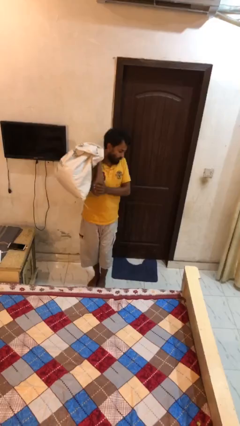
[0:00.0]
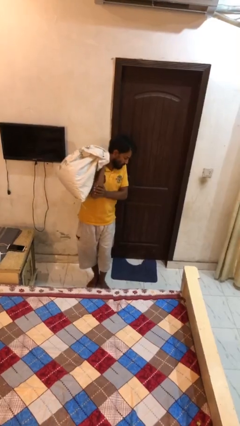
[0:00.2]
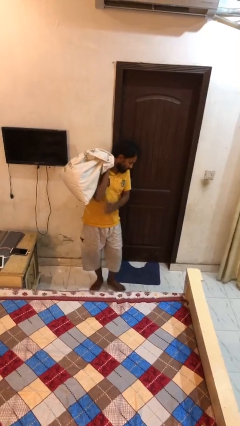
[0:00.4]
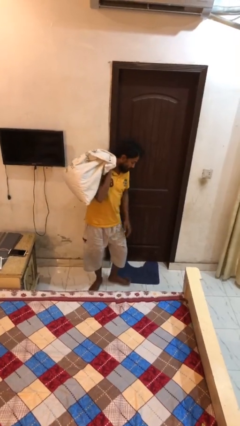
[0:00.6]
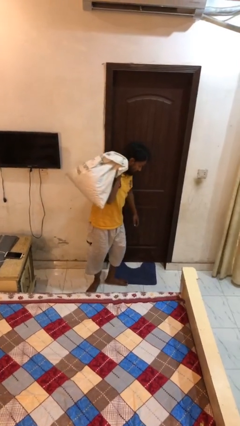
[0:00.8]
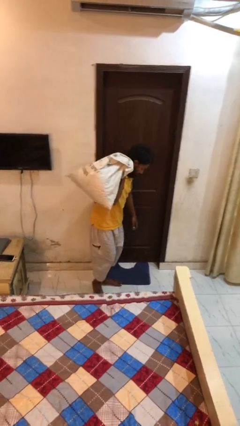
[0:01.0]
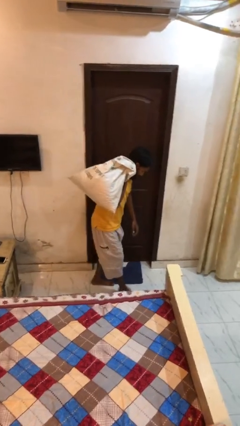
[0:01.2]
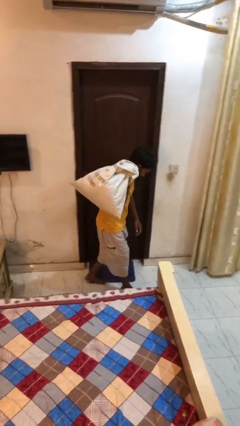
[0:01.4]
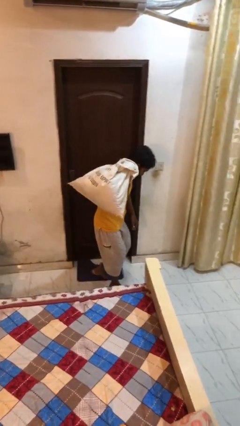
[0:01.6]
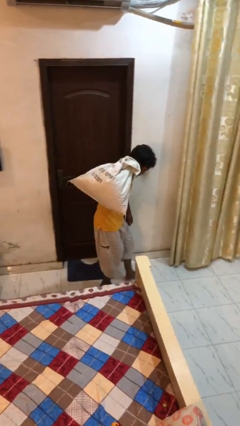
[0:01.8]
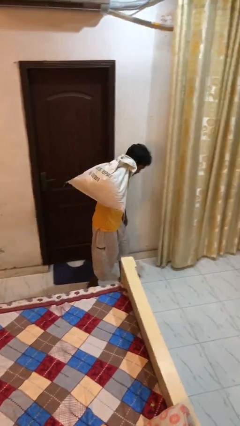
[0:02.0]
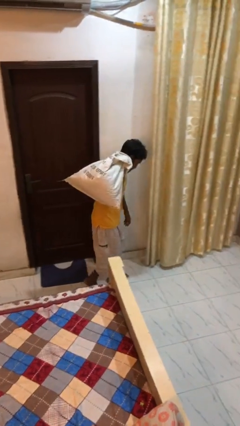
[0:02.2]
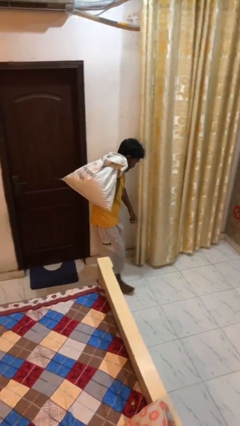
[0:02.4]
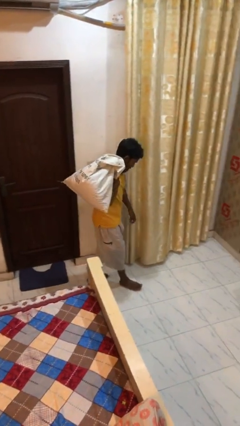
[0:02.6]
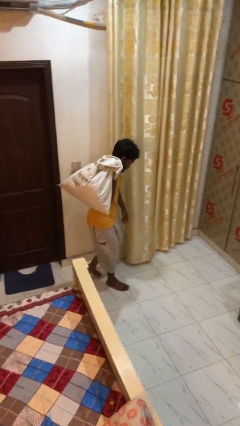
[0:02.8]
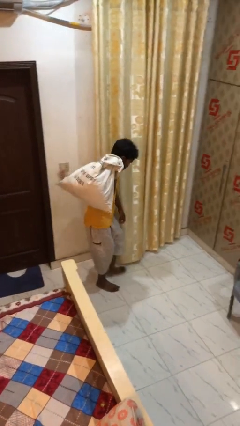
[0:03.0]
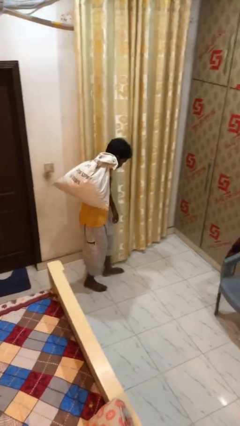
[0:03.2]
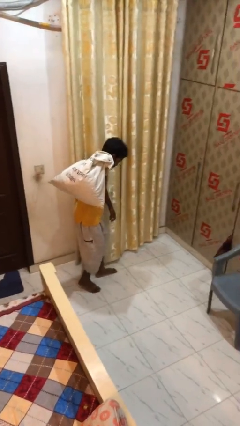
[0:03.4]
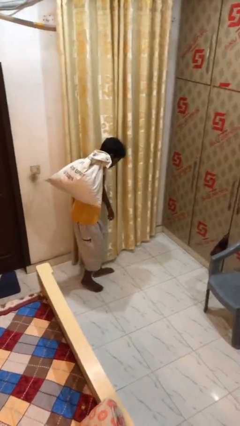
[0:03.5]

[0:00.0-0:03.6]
person carries heavy object

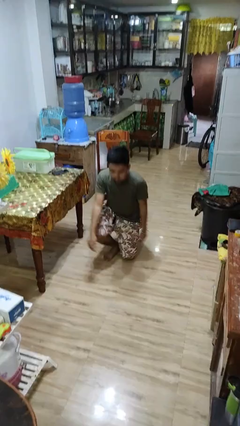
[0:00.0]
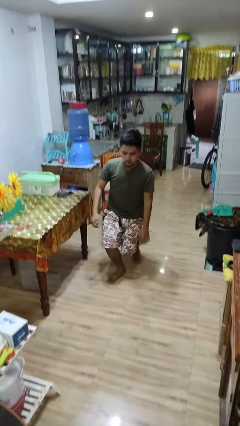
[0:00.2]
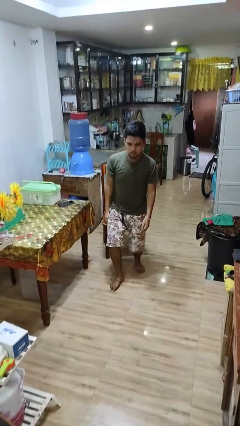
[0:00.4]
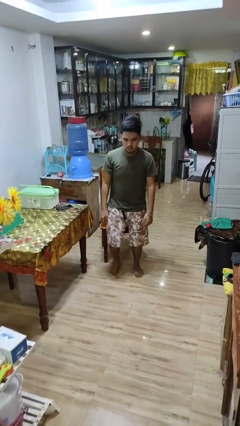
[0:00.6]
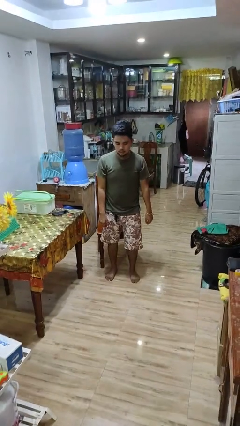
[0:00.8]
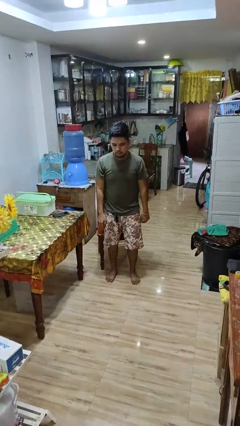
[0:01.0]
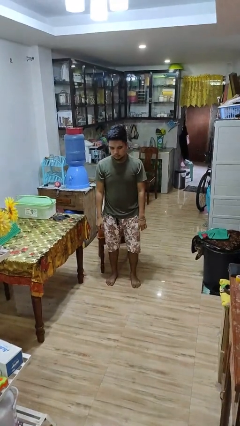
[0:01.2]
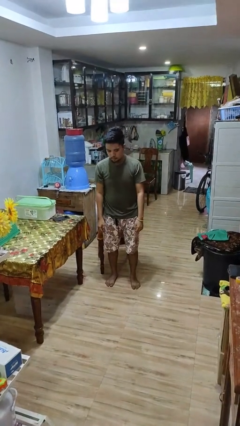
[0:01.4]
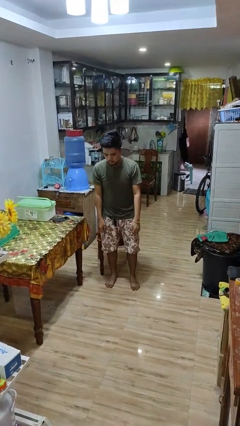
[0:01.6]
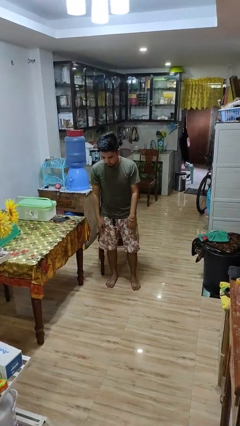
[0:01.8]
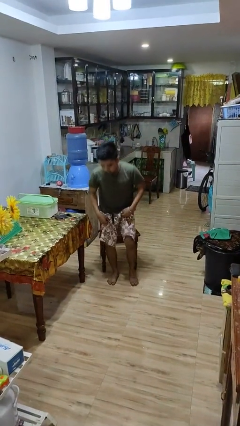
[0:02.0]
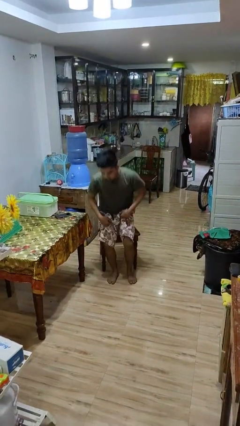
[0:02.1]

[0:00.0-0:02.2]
person stands up from floor

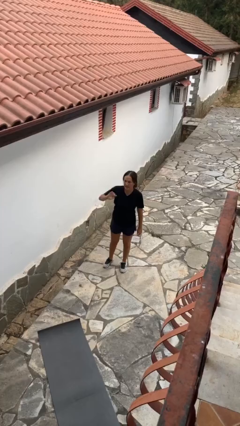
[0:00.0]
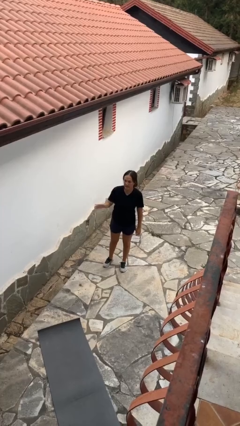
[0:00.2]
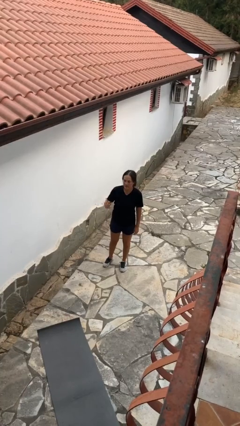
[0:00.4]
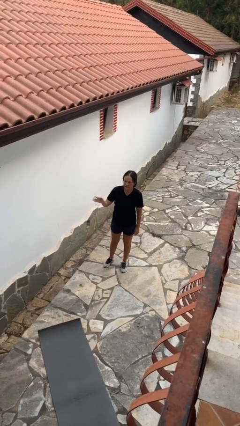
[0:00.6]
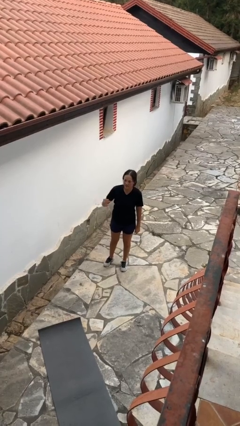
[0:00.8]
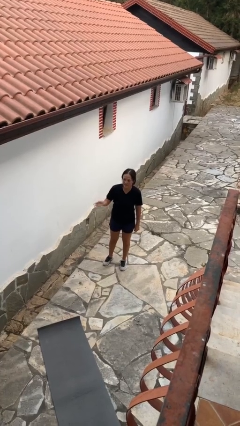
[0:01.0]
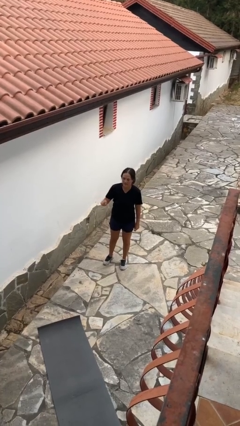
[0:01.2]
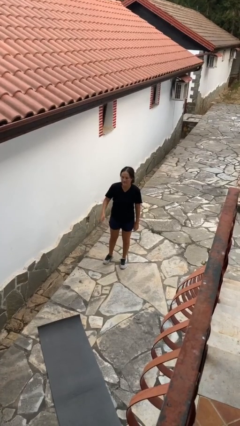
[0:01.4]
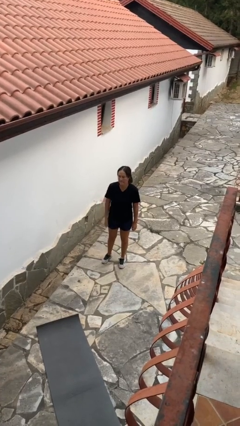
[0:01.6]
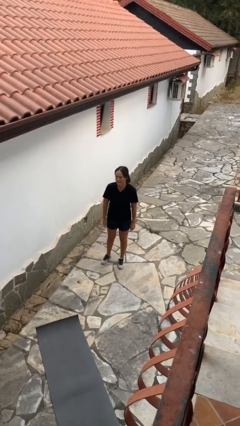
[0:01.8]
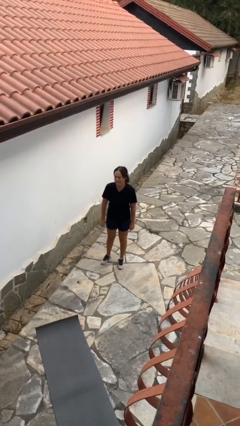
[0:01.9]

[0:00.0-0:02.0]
person gestures lower hand

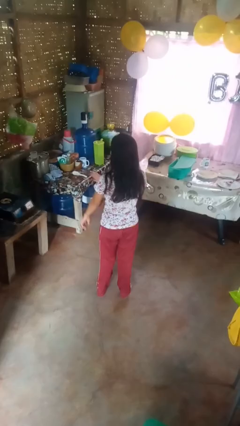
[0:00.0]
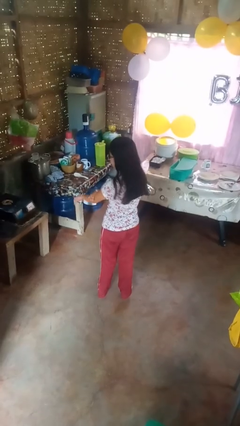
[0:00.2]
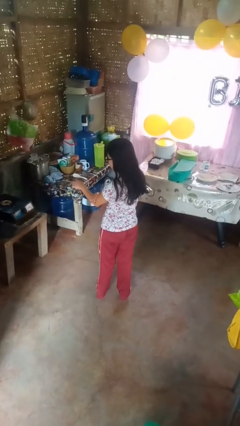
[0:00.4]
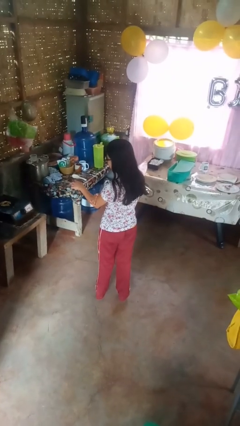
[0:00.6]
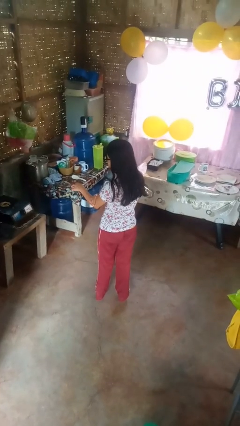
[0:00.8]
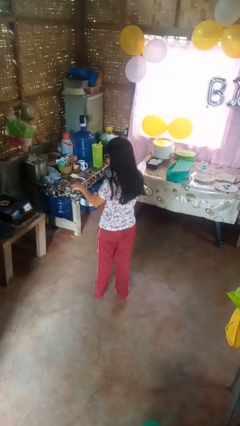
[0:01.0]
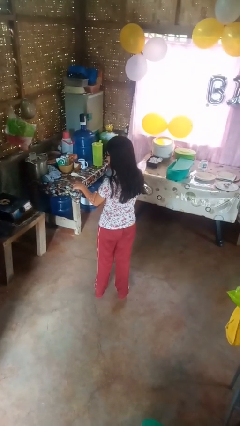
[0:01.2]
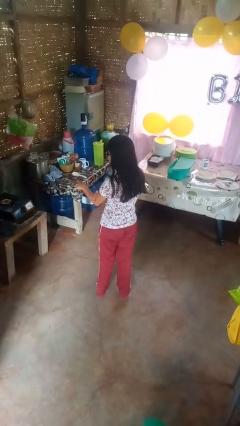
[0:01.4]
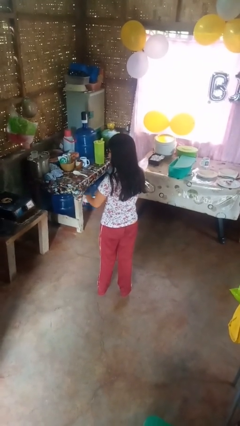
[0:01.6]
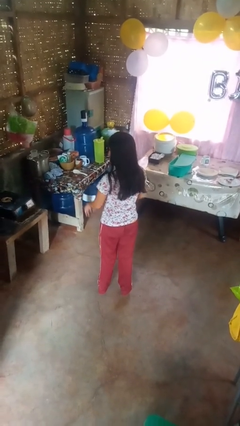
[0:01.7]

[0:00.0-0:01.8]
person swats bug

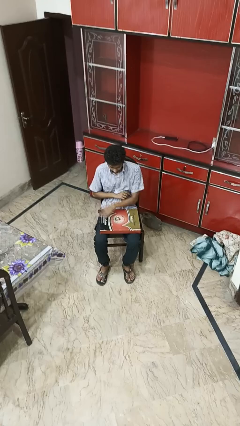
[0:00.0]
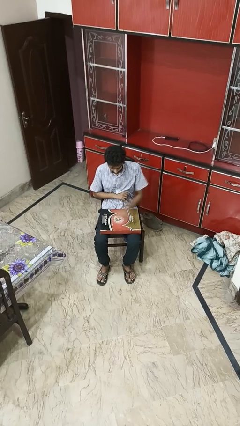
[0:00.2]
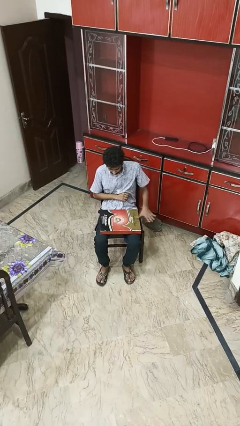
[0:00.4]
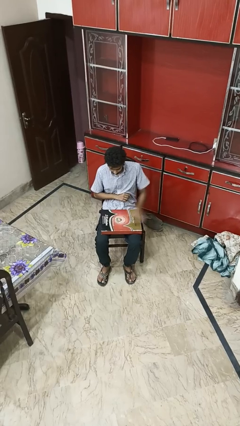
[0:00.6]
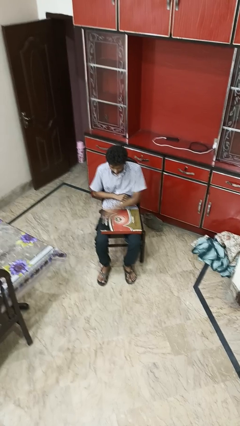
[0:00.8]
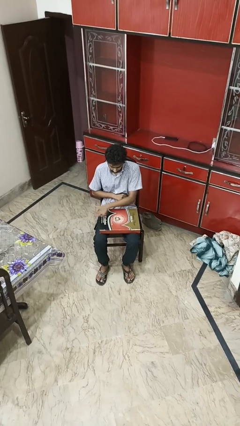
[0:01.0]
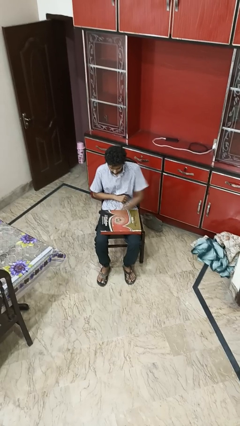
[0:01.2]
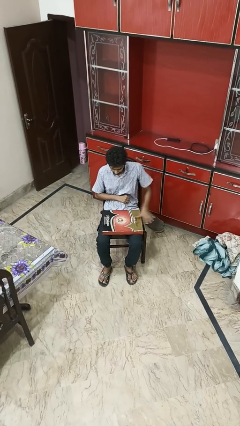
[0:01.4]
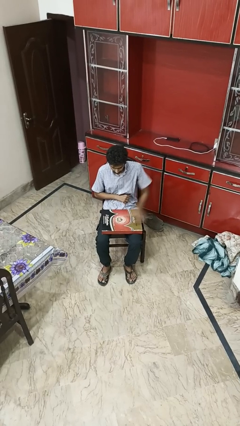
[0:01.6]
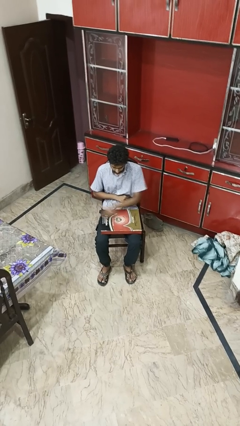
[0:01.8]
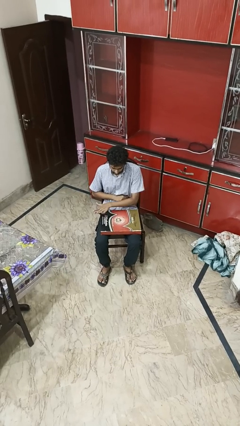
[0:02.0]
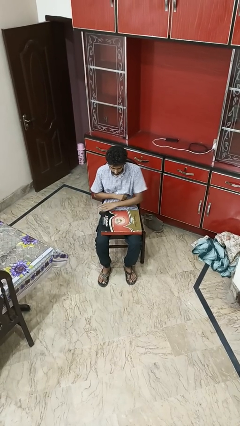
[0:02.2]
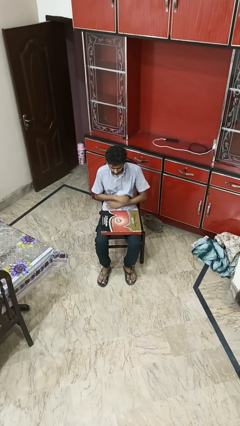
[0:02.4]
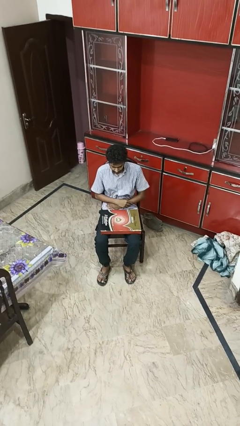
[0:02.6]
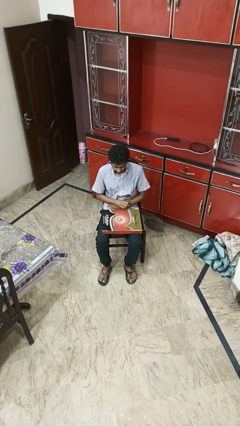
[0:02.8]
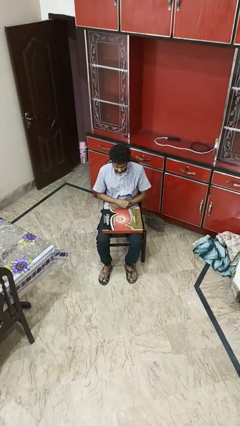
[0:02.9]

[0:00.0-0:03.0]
person waves hand over object

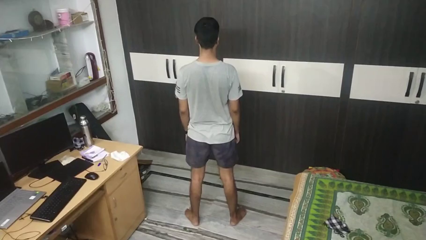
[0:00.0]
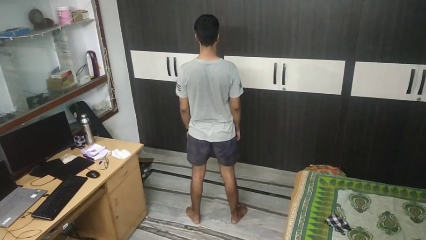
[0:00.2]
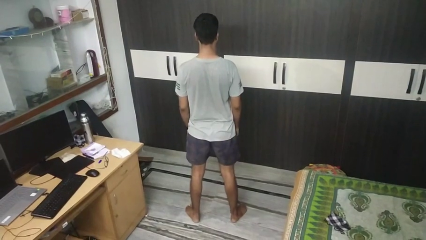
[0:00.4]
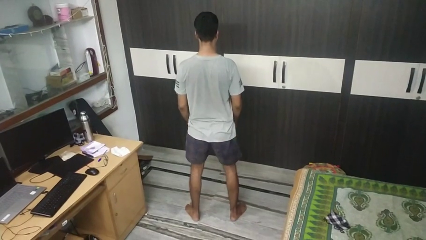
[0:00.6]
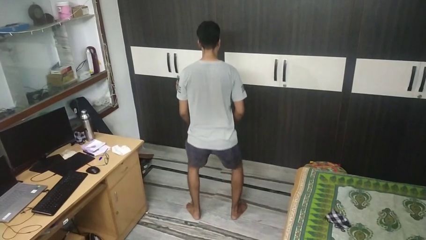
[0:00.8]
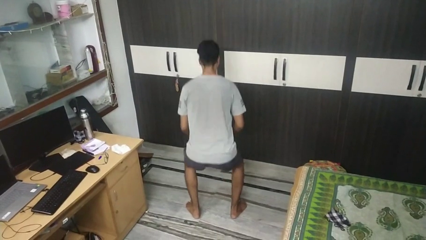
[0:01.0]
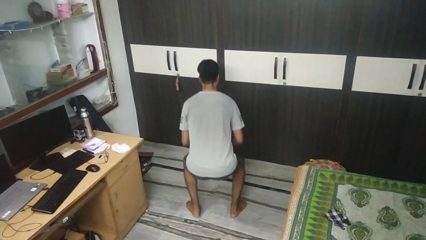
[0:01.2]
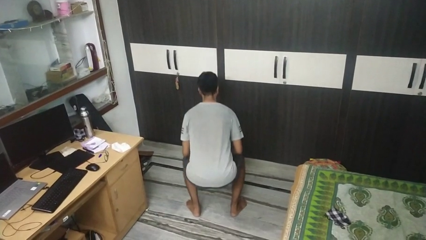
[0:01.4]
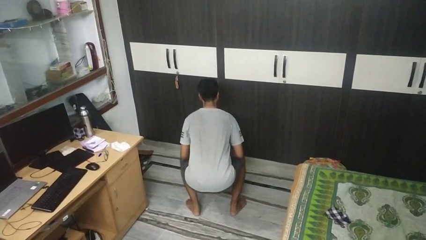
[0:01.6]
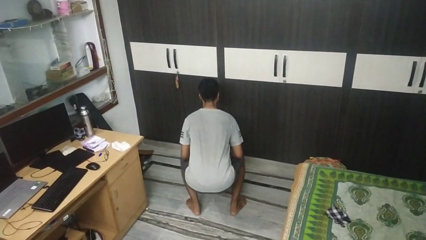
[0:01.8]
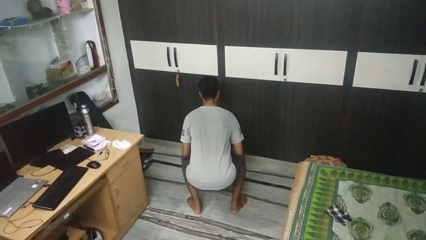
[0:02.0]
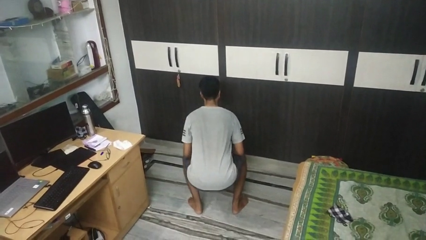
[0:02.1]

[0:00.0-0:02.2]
person squats

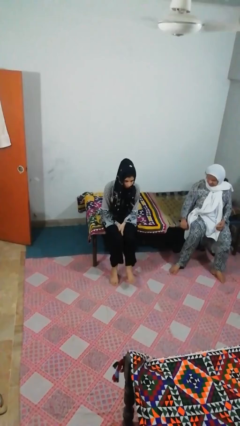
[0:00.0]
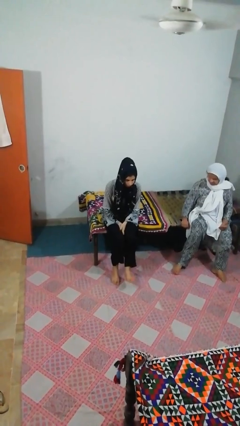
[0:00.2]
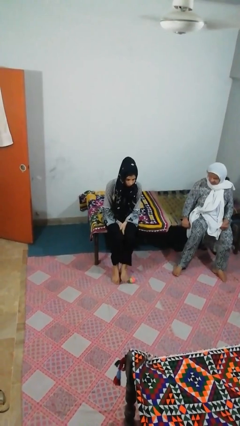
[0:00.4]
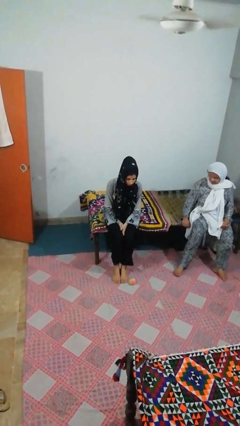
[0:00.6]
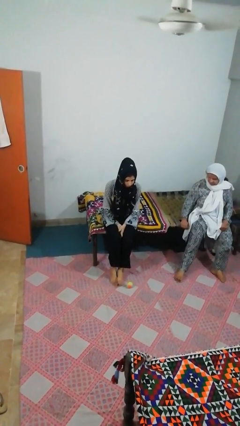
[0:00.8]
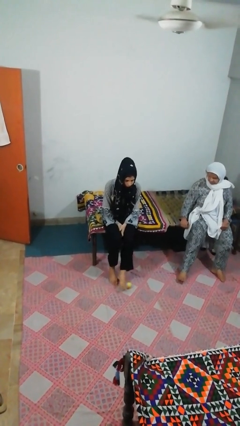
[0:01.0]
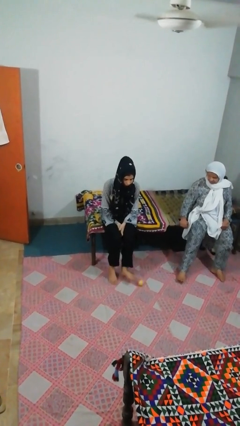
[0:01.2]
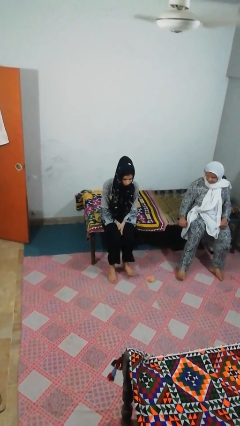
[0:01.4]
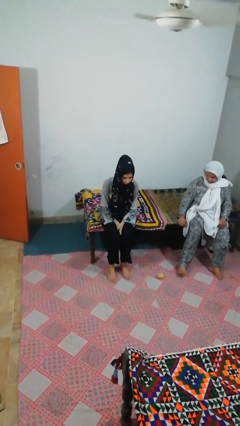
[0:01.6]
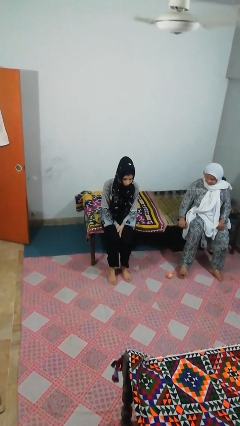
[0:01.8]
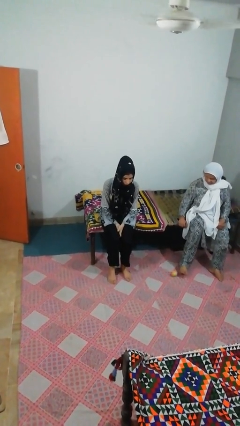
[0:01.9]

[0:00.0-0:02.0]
person kicks object to person
